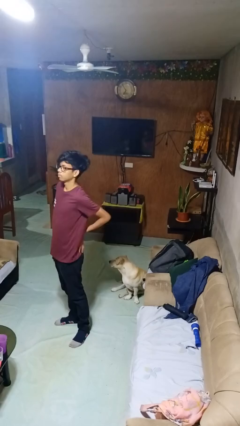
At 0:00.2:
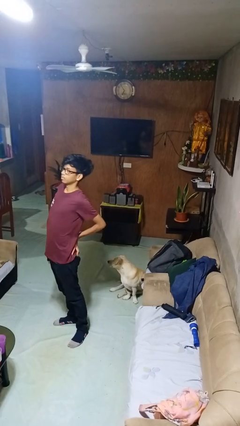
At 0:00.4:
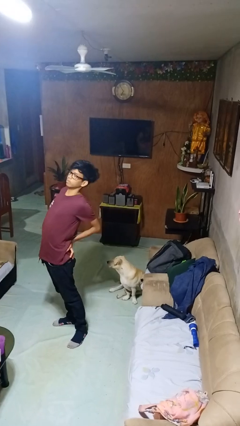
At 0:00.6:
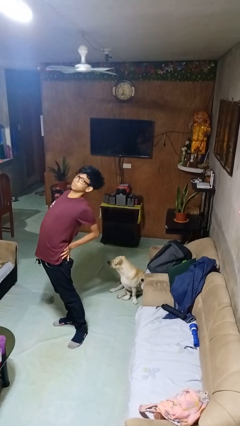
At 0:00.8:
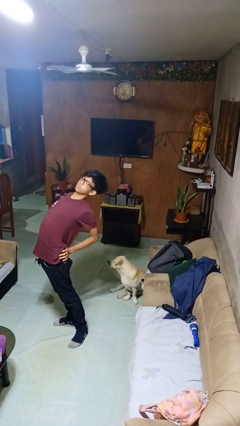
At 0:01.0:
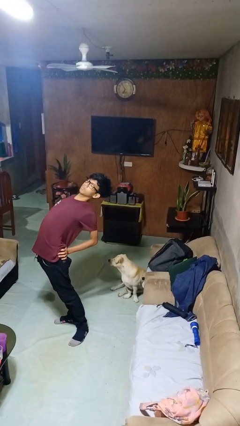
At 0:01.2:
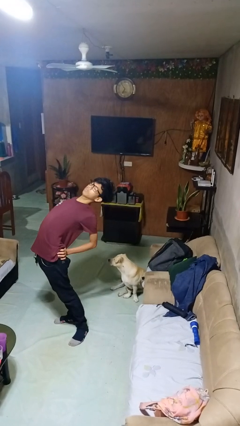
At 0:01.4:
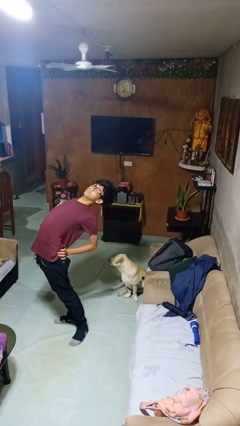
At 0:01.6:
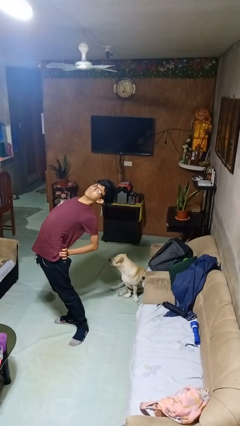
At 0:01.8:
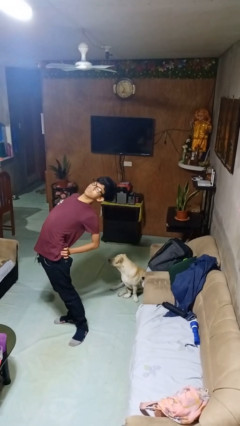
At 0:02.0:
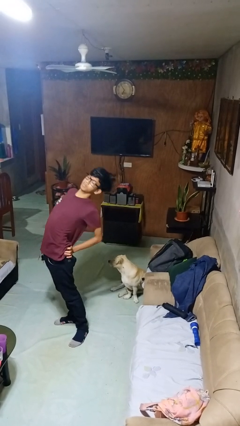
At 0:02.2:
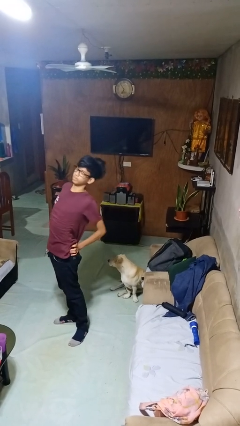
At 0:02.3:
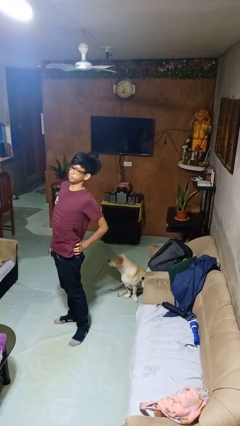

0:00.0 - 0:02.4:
person stretches back

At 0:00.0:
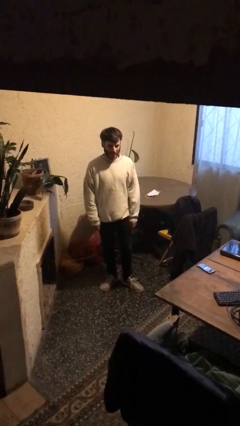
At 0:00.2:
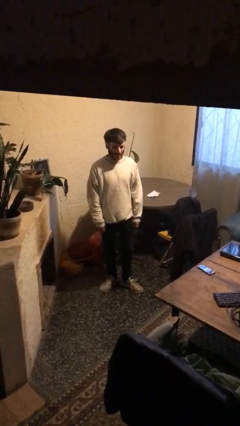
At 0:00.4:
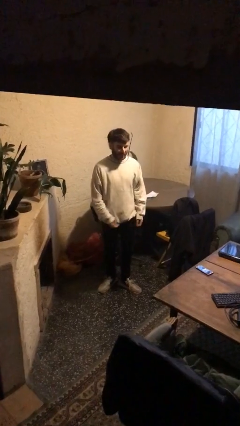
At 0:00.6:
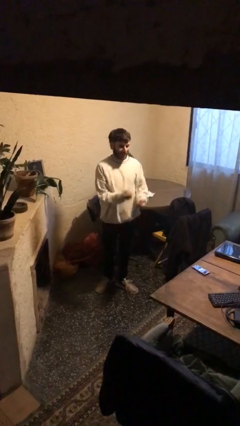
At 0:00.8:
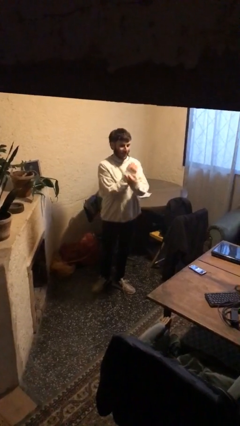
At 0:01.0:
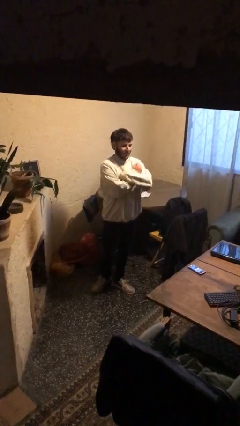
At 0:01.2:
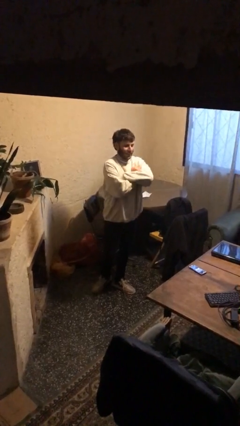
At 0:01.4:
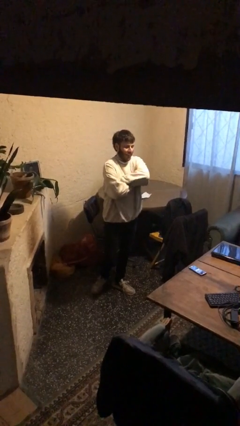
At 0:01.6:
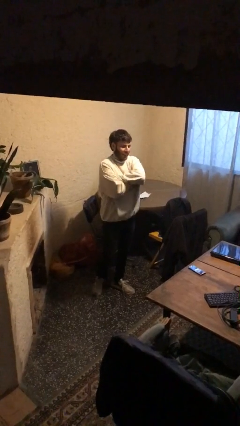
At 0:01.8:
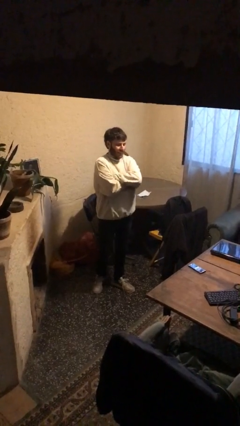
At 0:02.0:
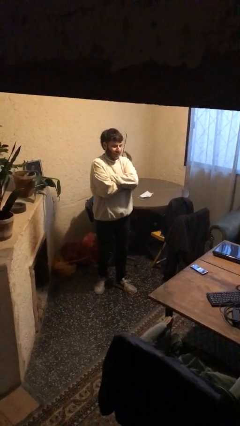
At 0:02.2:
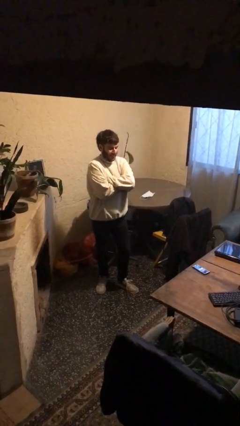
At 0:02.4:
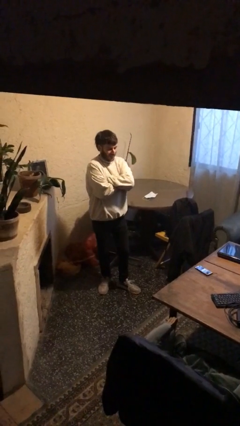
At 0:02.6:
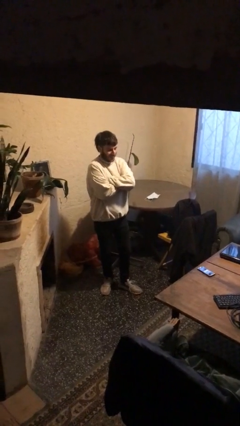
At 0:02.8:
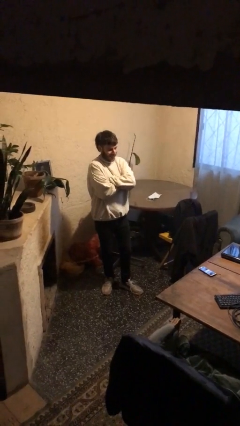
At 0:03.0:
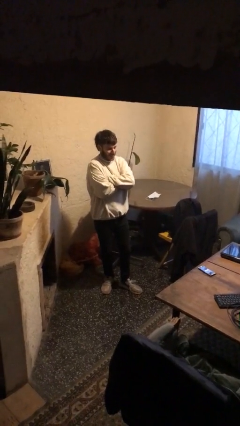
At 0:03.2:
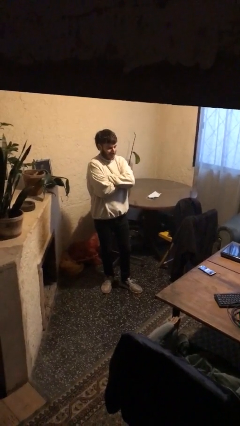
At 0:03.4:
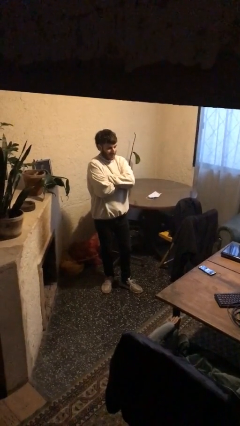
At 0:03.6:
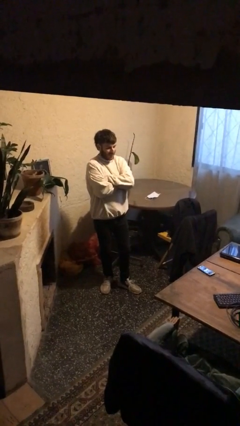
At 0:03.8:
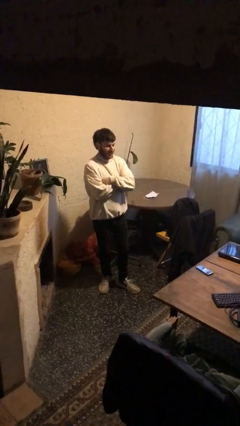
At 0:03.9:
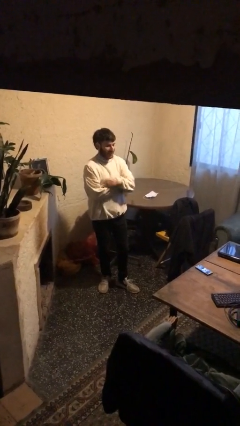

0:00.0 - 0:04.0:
person crosses arms

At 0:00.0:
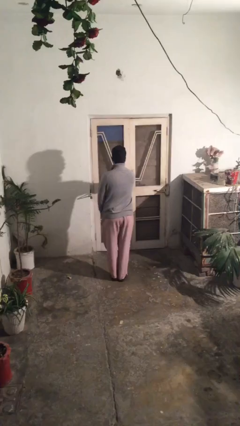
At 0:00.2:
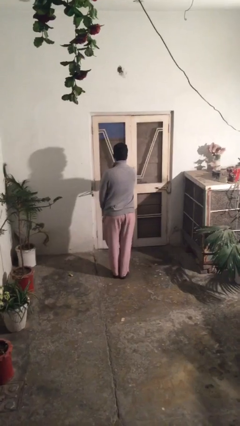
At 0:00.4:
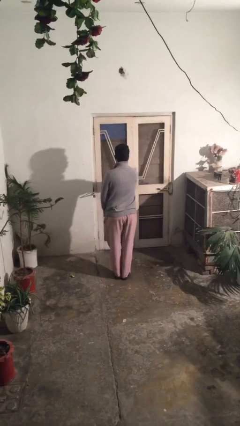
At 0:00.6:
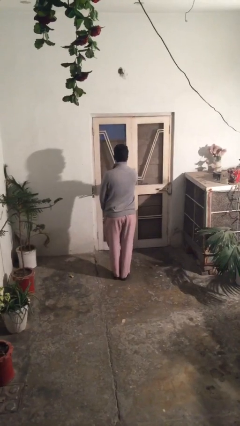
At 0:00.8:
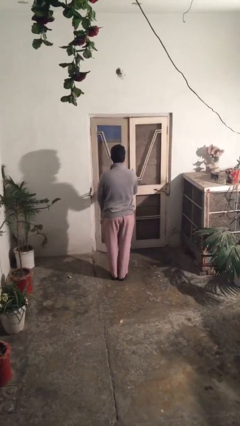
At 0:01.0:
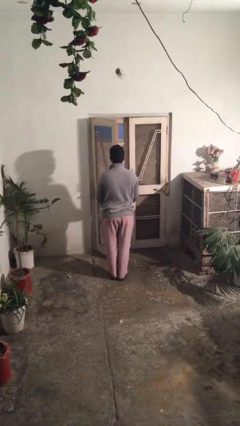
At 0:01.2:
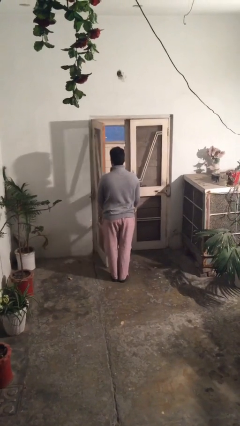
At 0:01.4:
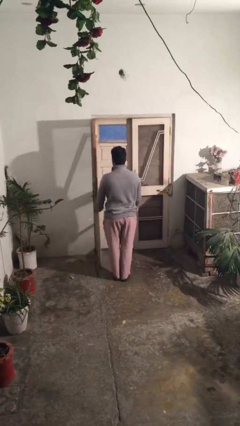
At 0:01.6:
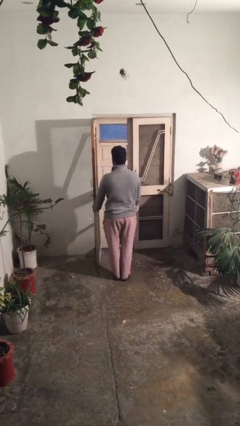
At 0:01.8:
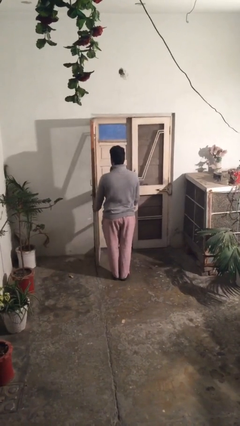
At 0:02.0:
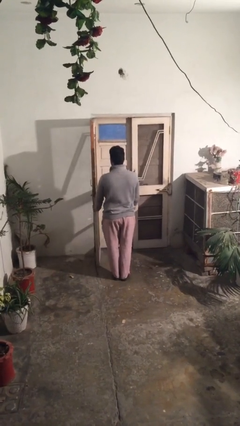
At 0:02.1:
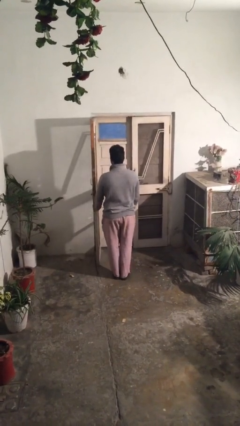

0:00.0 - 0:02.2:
person opens facility door

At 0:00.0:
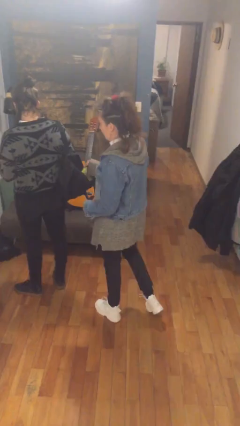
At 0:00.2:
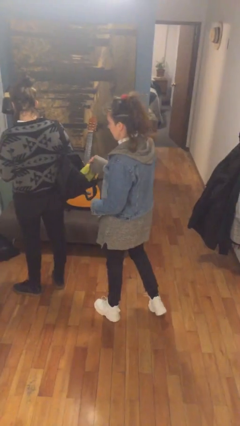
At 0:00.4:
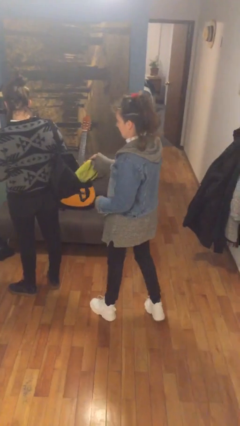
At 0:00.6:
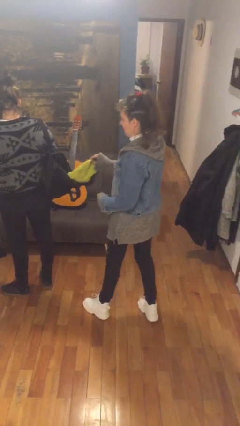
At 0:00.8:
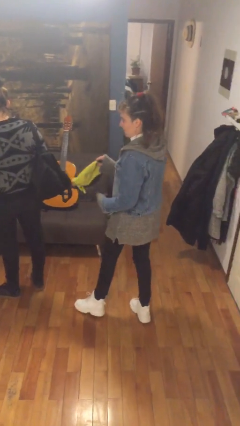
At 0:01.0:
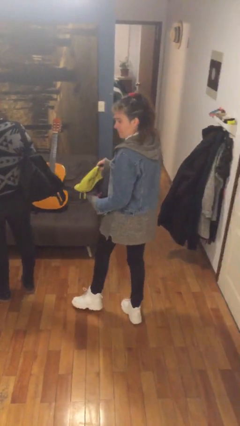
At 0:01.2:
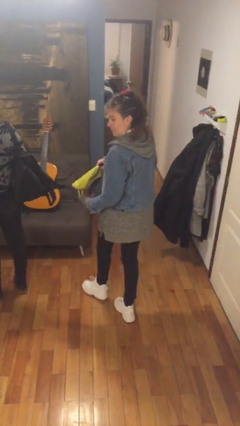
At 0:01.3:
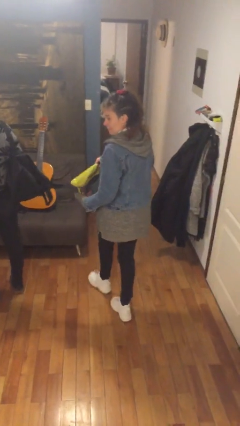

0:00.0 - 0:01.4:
person steals object from person

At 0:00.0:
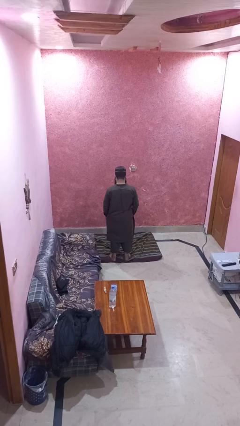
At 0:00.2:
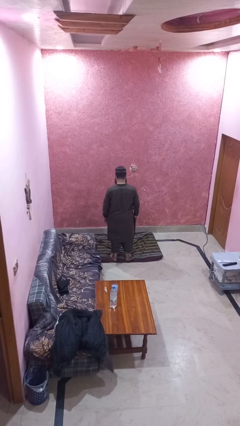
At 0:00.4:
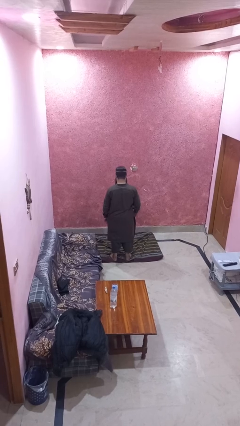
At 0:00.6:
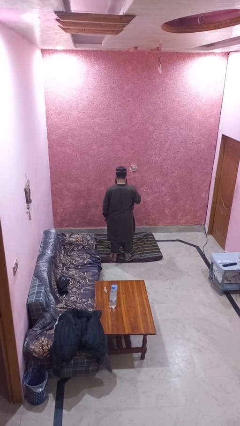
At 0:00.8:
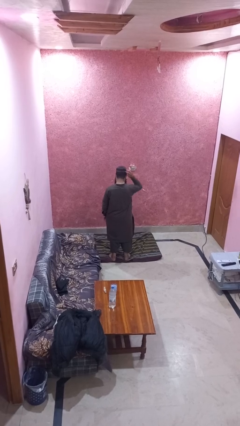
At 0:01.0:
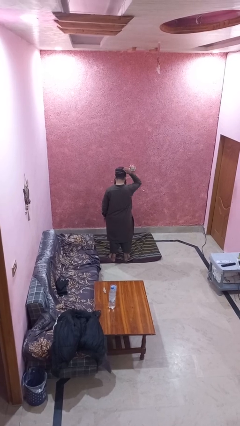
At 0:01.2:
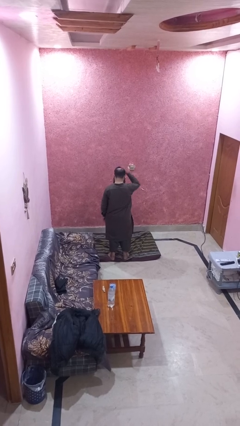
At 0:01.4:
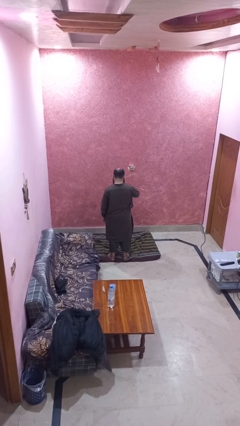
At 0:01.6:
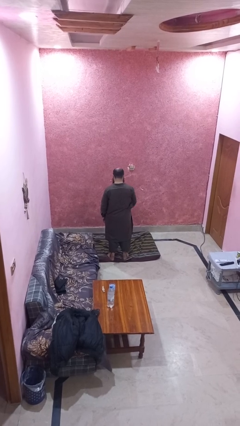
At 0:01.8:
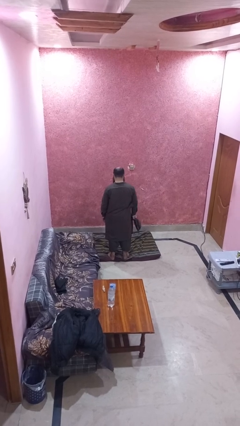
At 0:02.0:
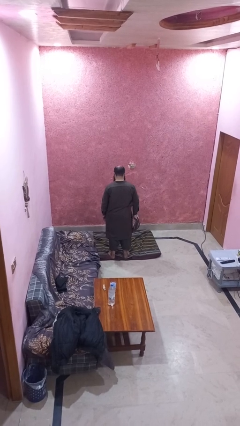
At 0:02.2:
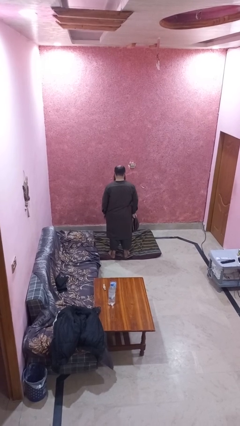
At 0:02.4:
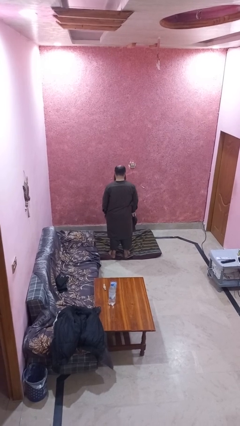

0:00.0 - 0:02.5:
person takes off hat

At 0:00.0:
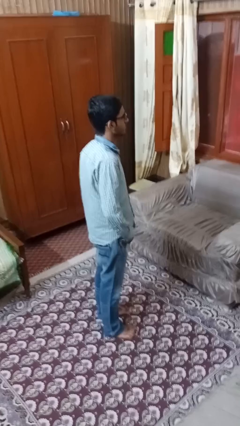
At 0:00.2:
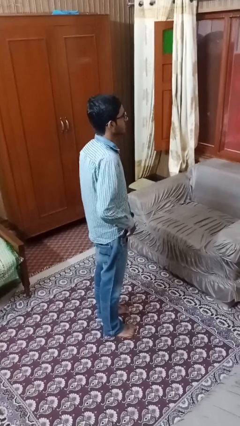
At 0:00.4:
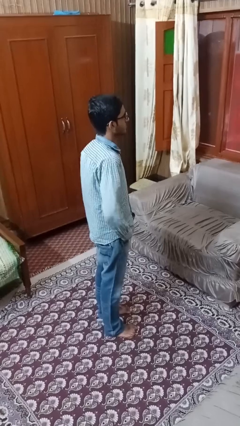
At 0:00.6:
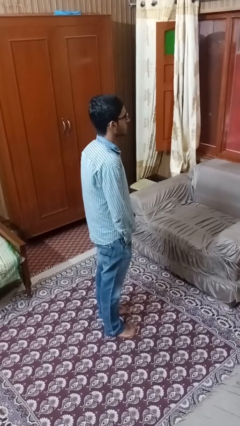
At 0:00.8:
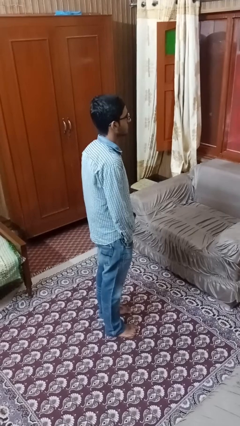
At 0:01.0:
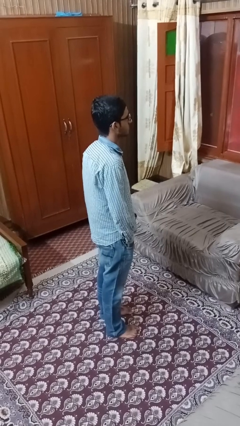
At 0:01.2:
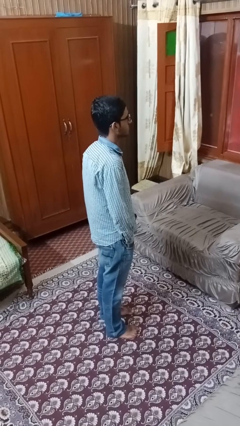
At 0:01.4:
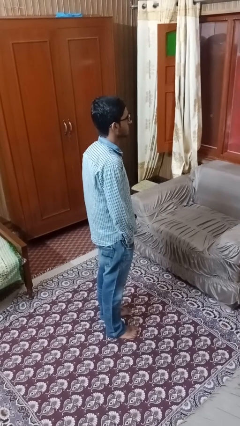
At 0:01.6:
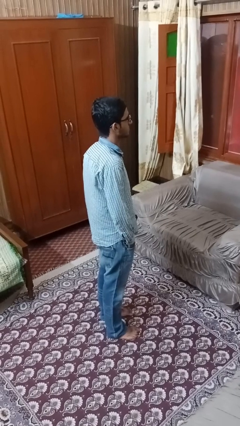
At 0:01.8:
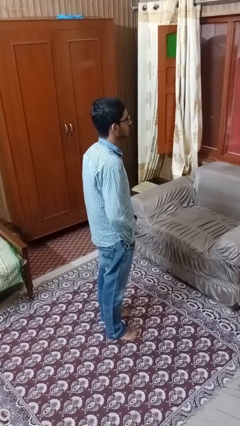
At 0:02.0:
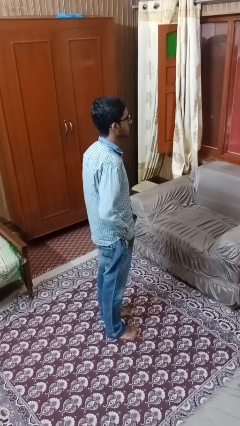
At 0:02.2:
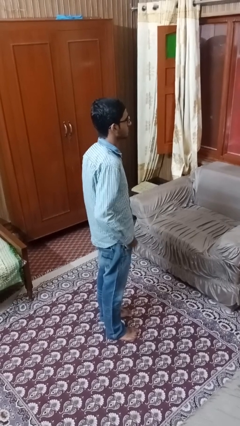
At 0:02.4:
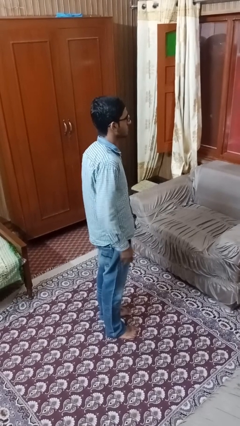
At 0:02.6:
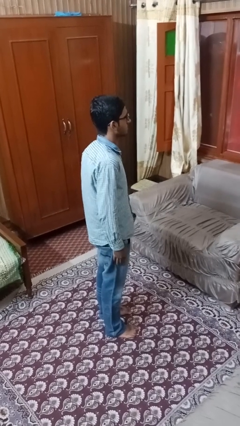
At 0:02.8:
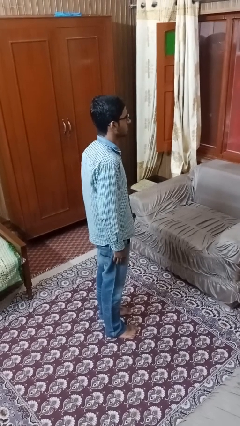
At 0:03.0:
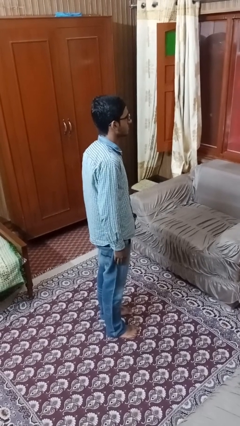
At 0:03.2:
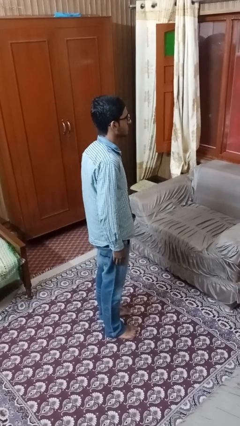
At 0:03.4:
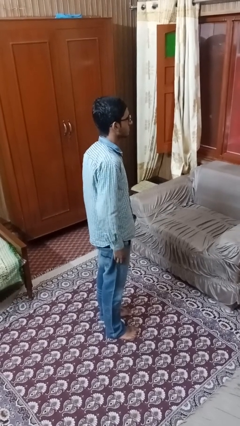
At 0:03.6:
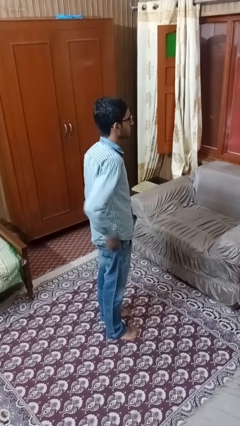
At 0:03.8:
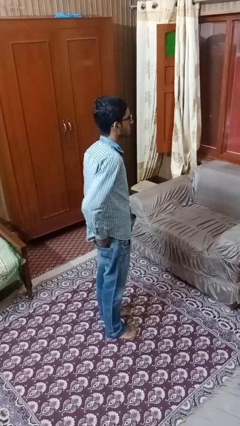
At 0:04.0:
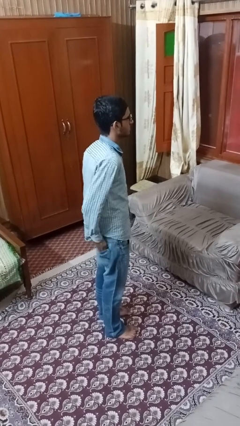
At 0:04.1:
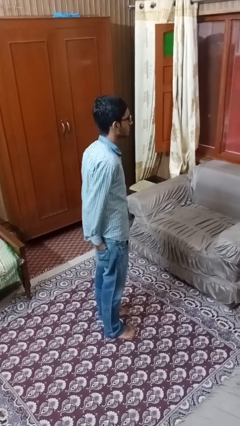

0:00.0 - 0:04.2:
person puts hands in back pockets

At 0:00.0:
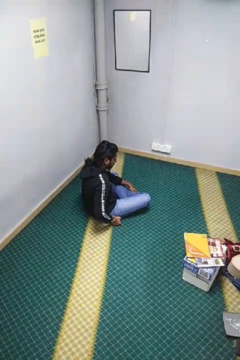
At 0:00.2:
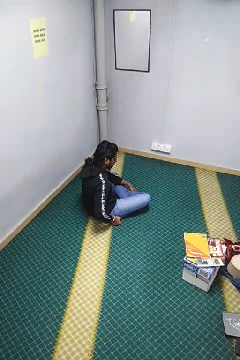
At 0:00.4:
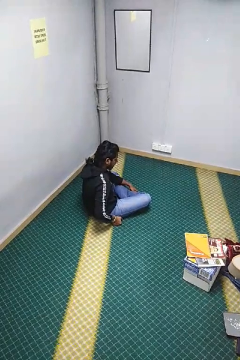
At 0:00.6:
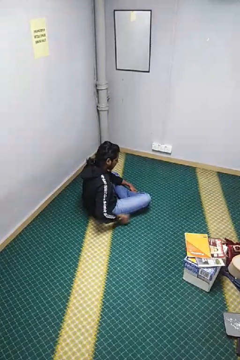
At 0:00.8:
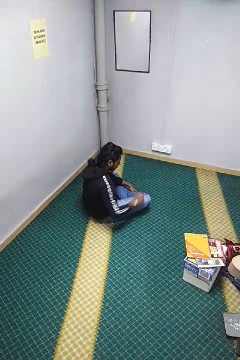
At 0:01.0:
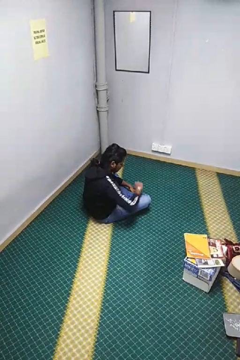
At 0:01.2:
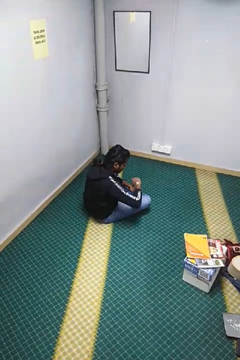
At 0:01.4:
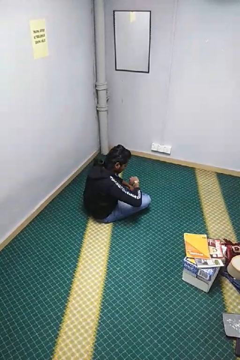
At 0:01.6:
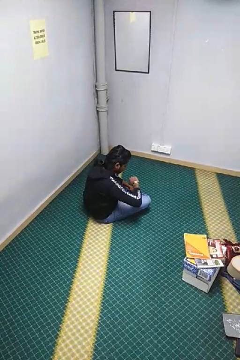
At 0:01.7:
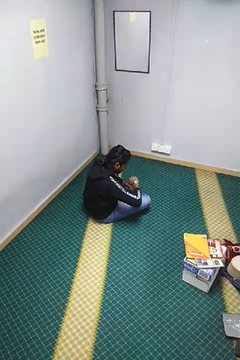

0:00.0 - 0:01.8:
person looks at wristwatch
